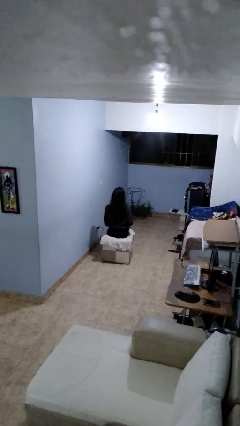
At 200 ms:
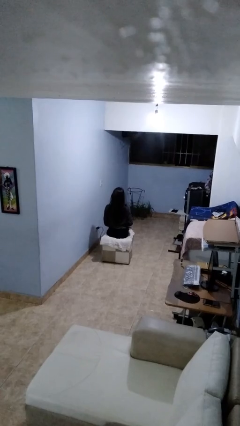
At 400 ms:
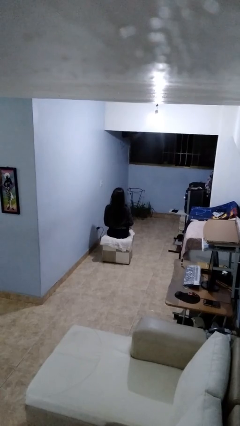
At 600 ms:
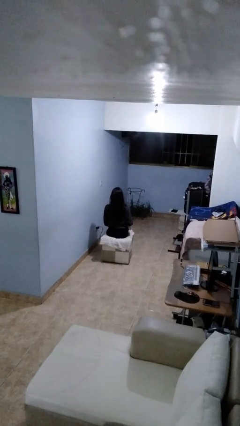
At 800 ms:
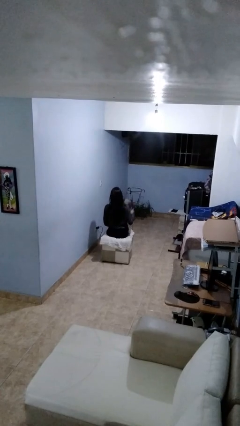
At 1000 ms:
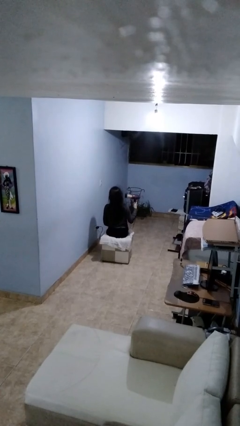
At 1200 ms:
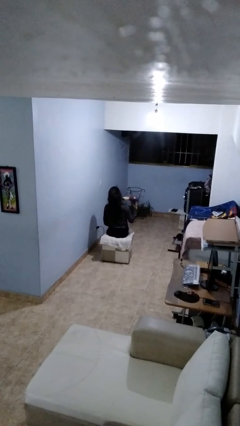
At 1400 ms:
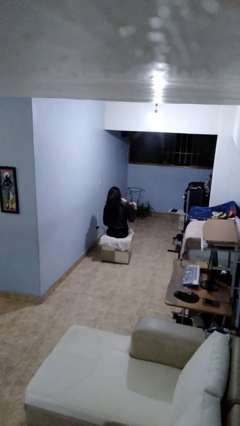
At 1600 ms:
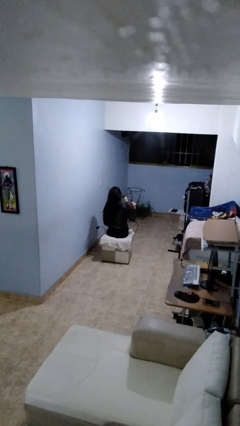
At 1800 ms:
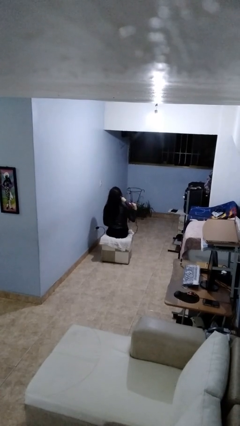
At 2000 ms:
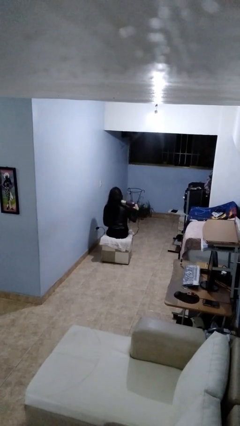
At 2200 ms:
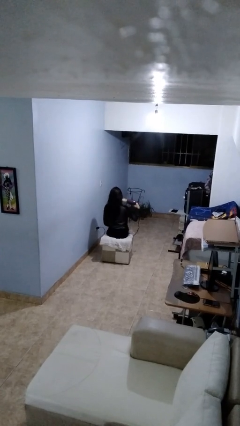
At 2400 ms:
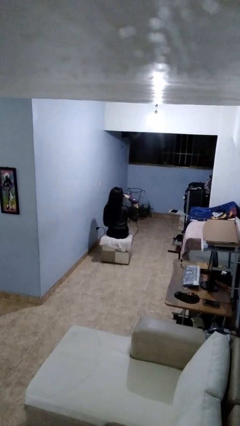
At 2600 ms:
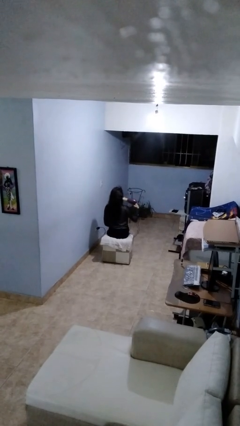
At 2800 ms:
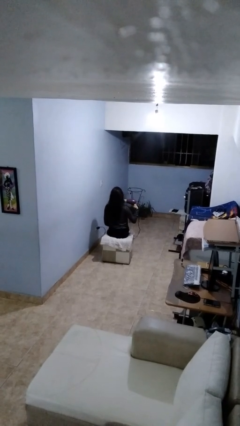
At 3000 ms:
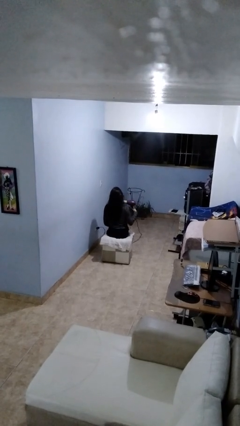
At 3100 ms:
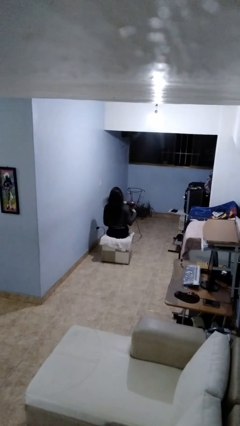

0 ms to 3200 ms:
person dries hair with hairdryer

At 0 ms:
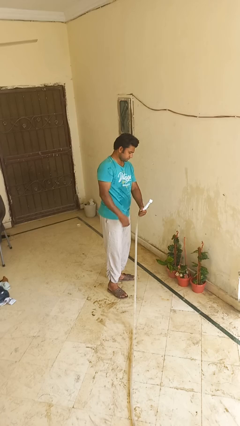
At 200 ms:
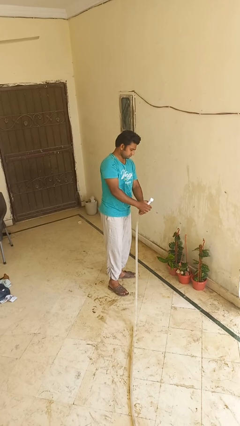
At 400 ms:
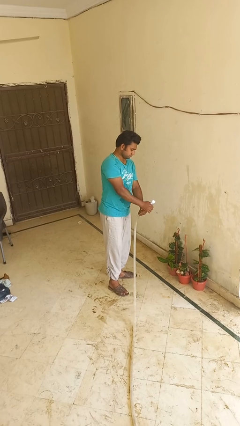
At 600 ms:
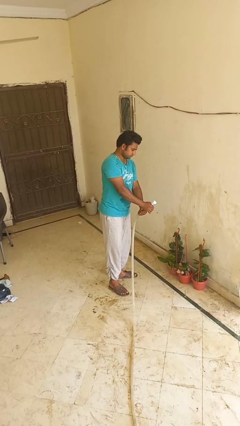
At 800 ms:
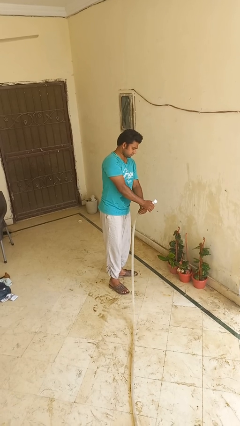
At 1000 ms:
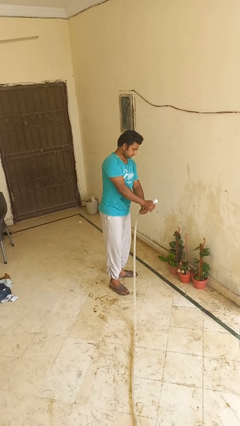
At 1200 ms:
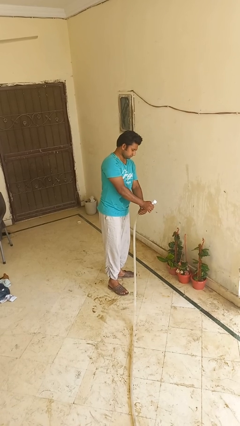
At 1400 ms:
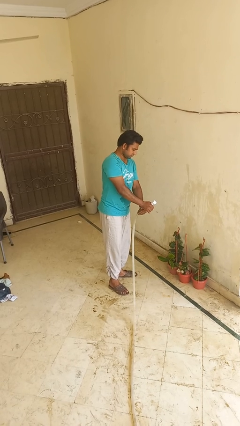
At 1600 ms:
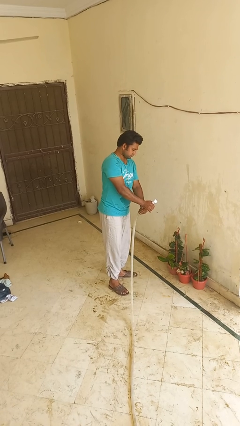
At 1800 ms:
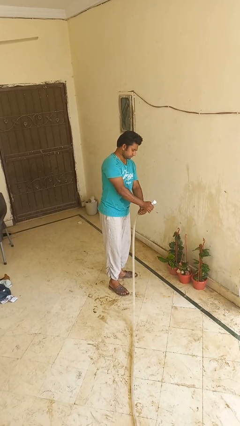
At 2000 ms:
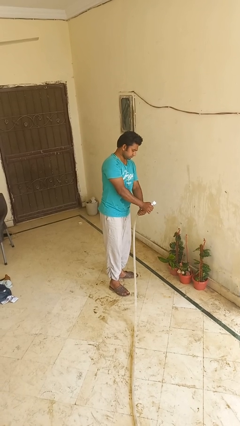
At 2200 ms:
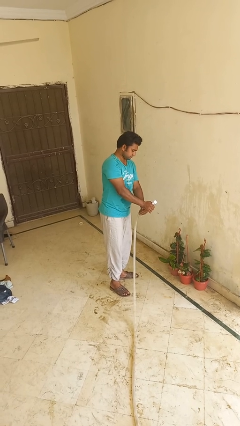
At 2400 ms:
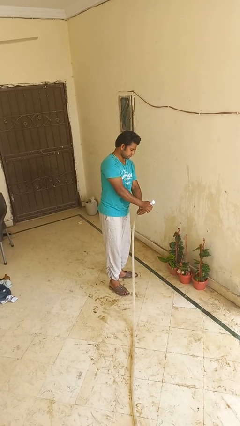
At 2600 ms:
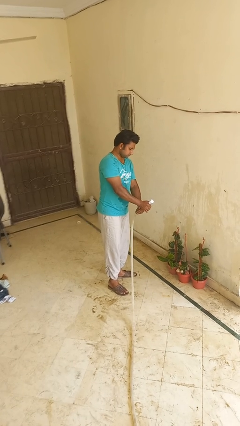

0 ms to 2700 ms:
person waters houseplant

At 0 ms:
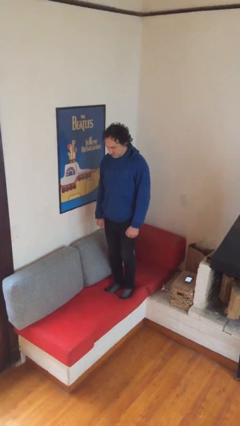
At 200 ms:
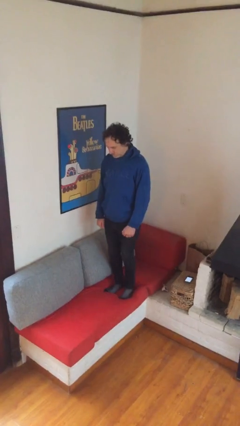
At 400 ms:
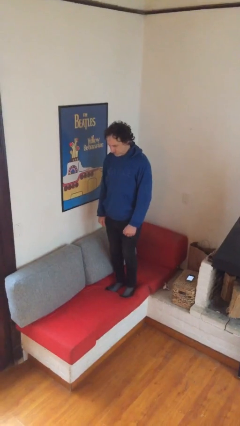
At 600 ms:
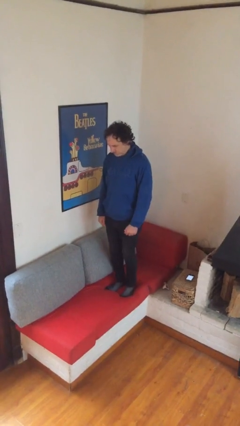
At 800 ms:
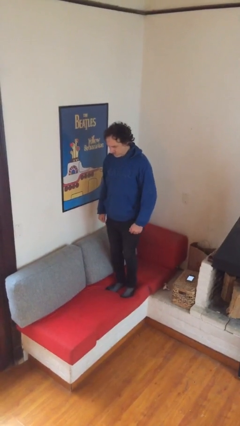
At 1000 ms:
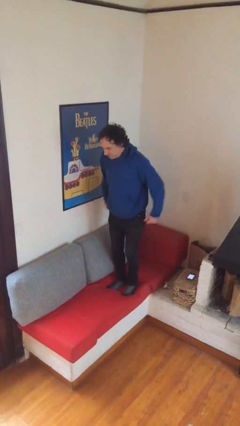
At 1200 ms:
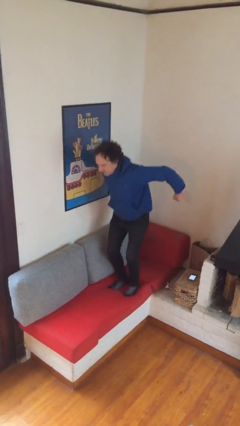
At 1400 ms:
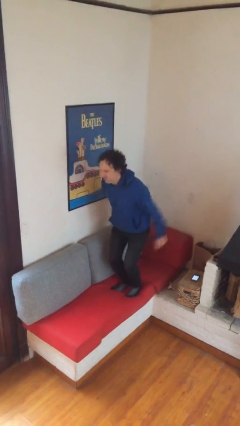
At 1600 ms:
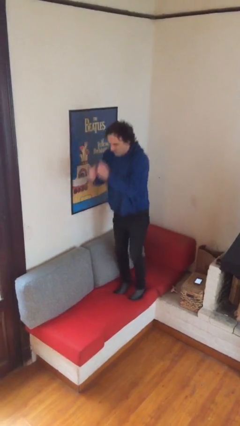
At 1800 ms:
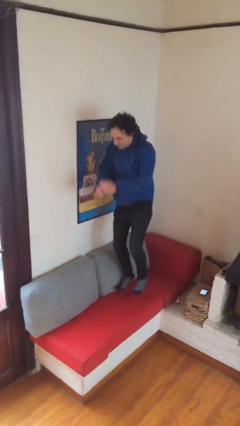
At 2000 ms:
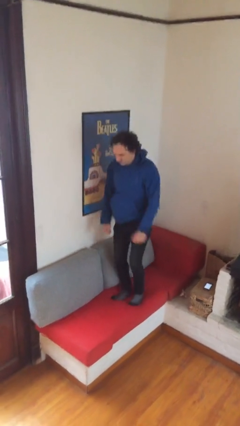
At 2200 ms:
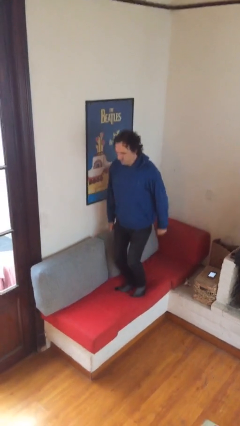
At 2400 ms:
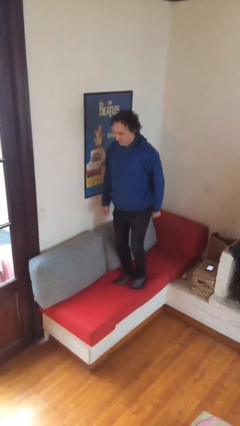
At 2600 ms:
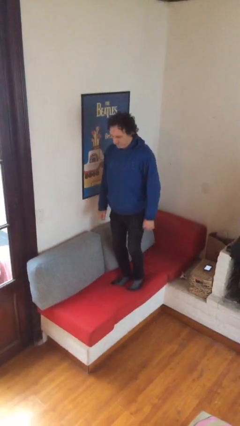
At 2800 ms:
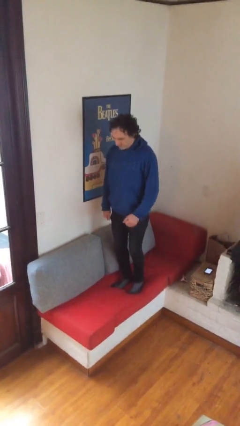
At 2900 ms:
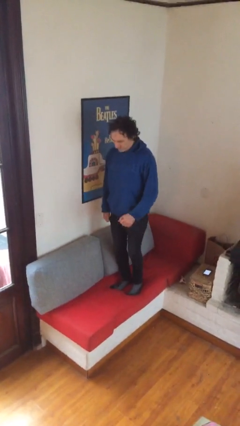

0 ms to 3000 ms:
person jumps on couch

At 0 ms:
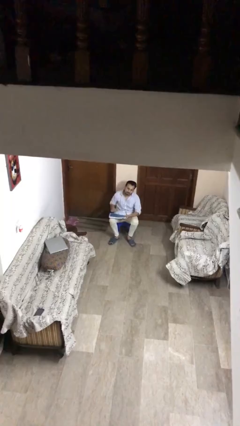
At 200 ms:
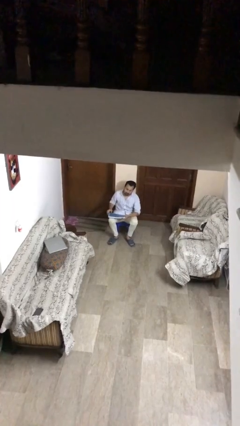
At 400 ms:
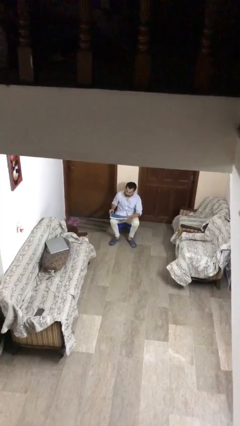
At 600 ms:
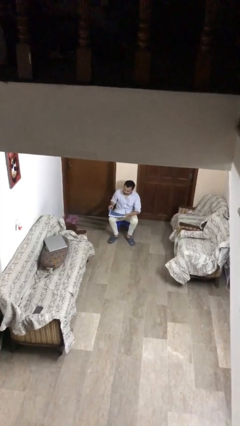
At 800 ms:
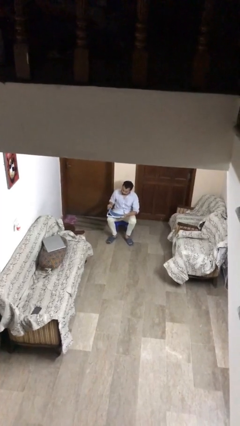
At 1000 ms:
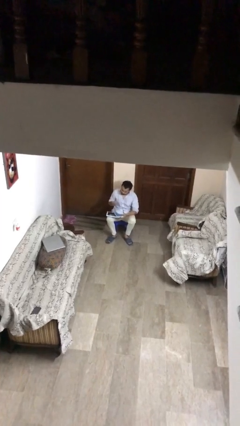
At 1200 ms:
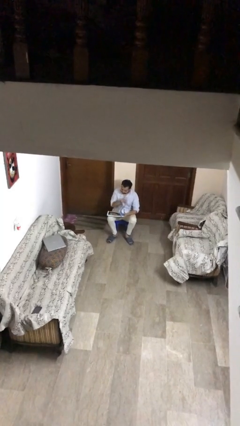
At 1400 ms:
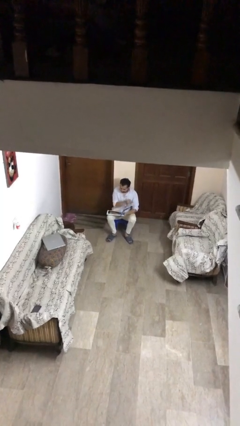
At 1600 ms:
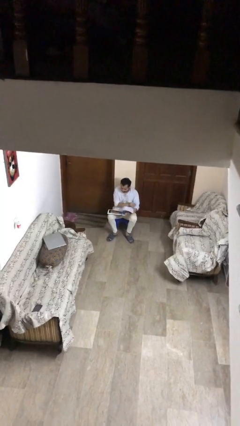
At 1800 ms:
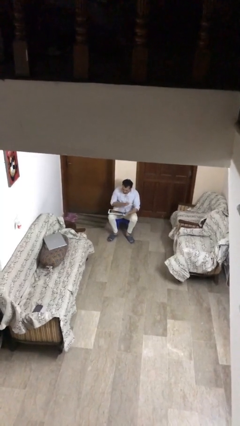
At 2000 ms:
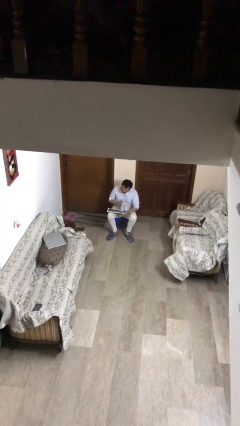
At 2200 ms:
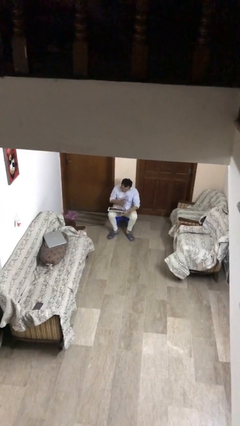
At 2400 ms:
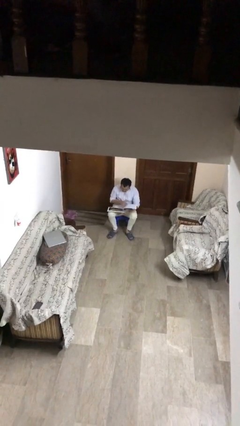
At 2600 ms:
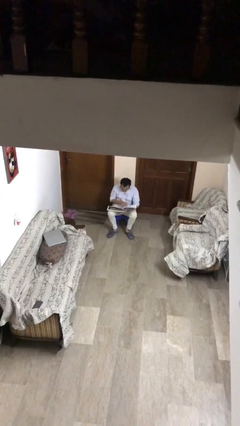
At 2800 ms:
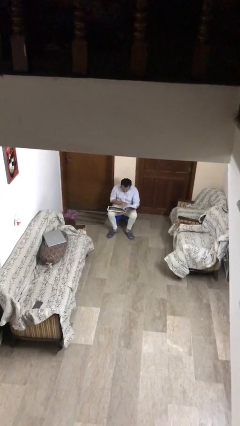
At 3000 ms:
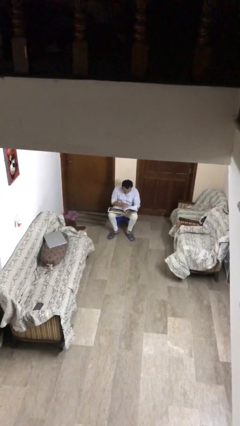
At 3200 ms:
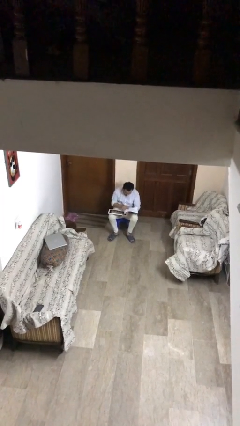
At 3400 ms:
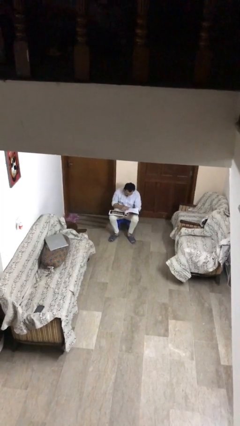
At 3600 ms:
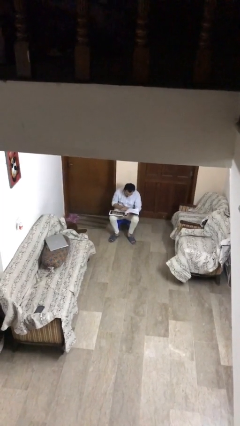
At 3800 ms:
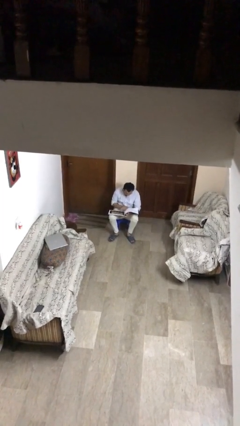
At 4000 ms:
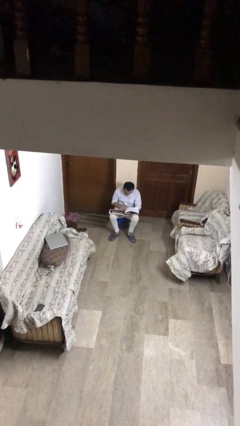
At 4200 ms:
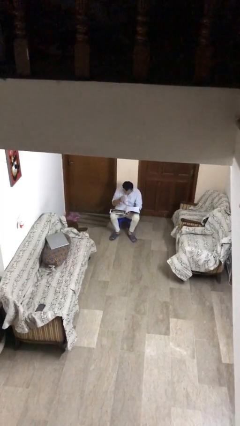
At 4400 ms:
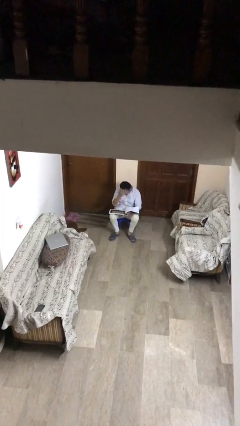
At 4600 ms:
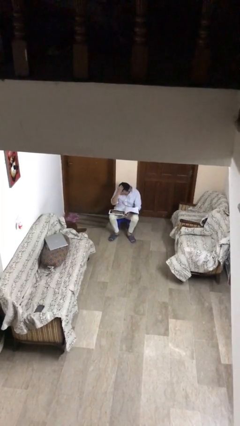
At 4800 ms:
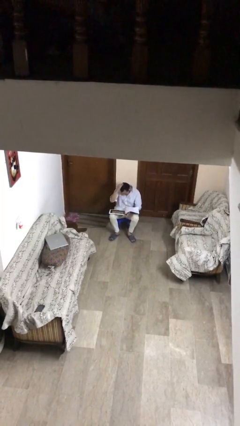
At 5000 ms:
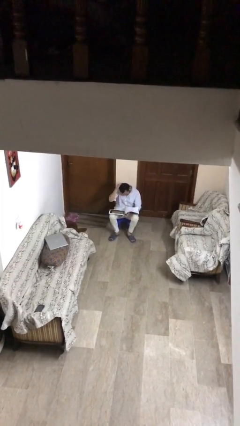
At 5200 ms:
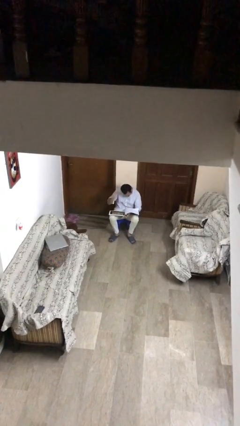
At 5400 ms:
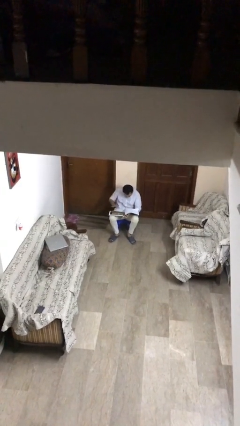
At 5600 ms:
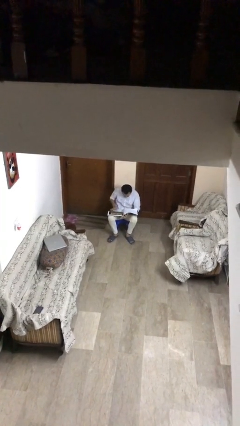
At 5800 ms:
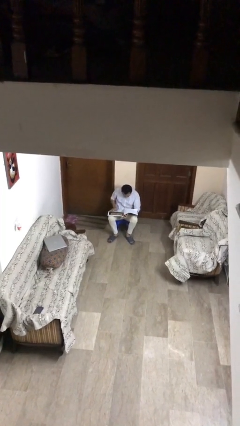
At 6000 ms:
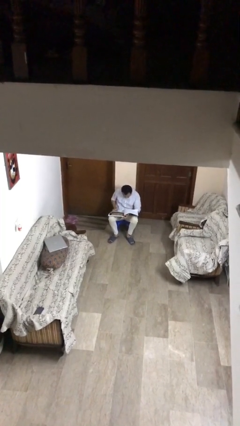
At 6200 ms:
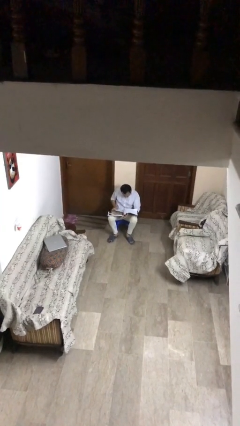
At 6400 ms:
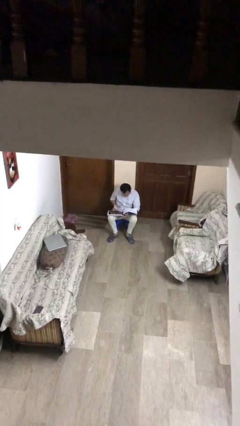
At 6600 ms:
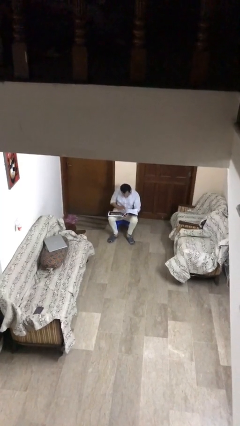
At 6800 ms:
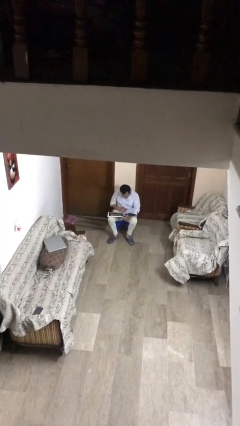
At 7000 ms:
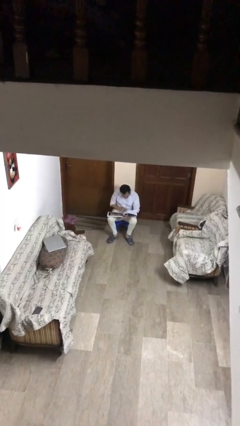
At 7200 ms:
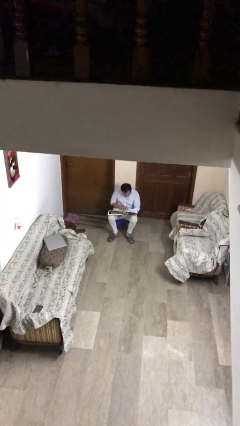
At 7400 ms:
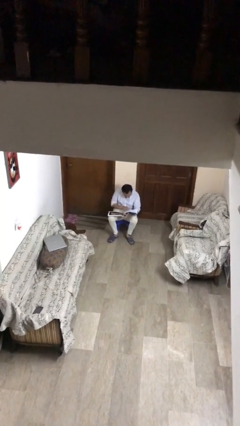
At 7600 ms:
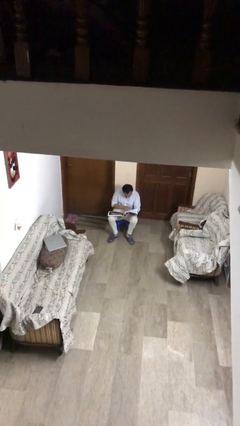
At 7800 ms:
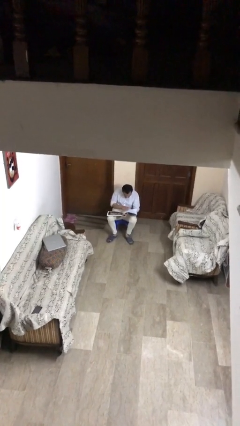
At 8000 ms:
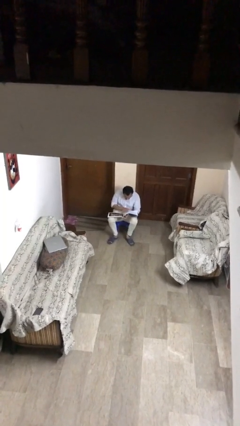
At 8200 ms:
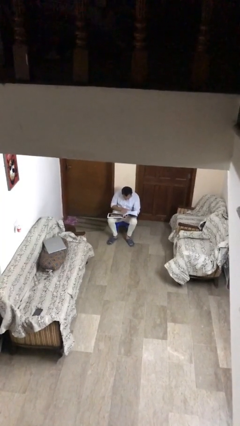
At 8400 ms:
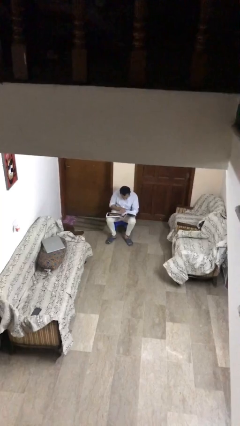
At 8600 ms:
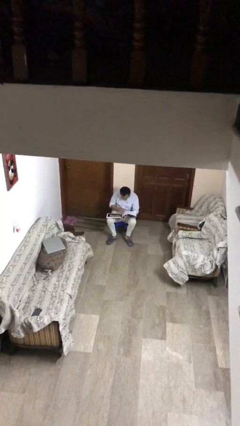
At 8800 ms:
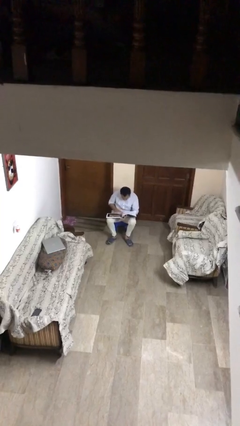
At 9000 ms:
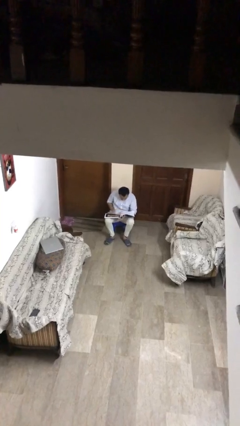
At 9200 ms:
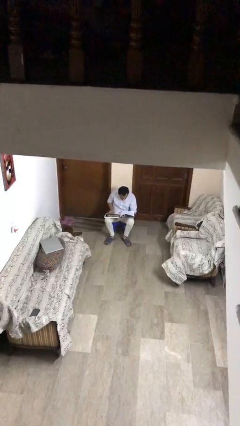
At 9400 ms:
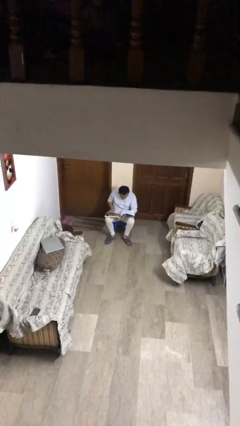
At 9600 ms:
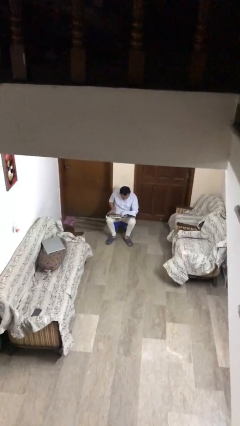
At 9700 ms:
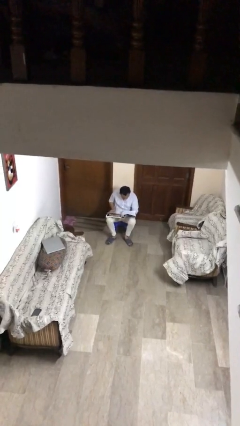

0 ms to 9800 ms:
person reads document
